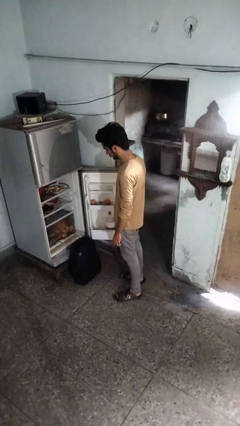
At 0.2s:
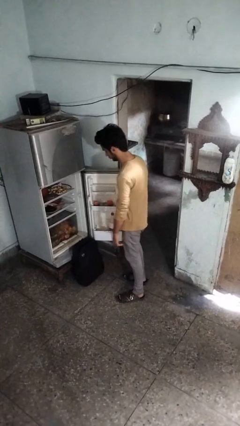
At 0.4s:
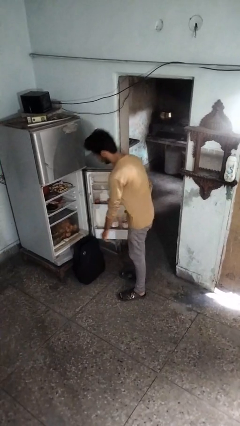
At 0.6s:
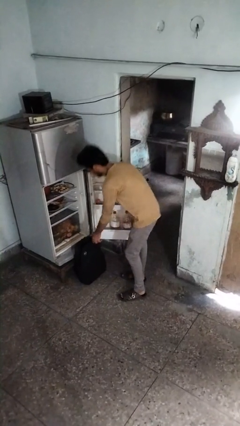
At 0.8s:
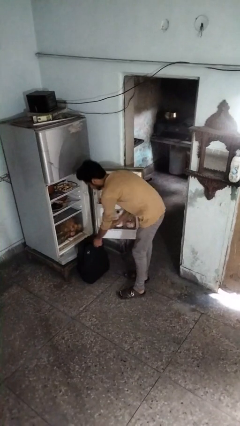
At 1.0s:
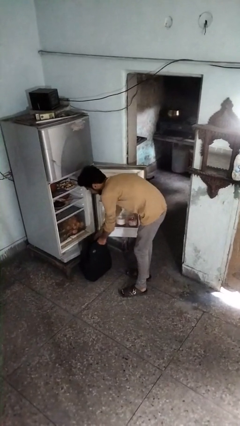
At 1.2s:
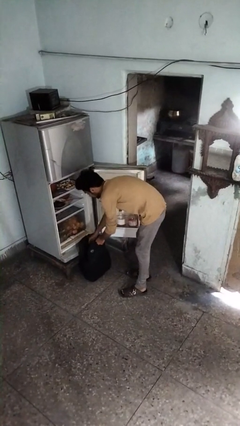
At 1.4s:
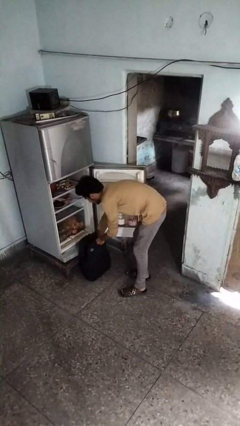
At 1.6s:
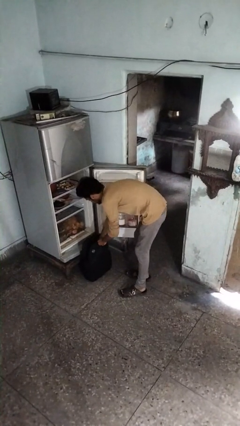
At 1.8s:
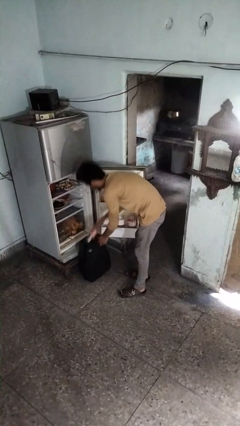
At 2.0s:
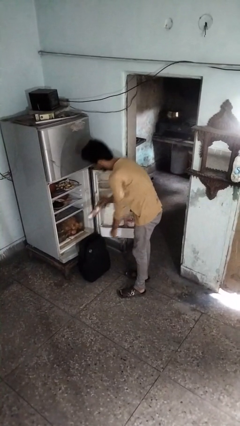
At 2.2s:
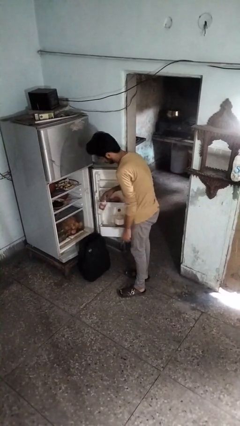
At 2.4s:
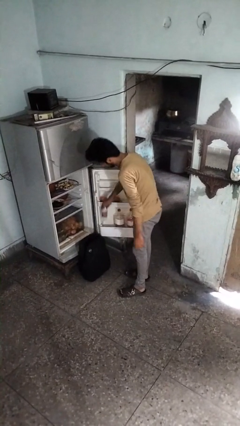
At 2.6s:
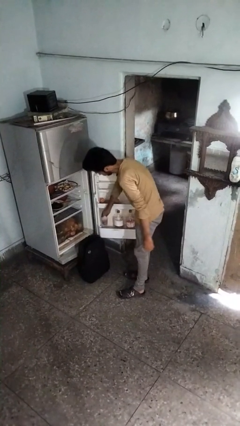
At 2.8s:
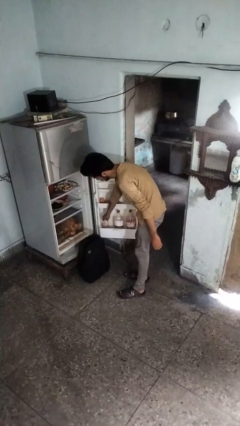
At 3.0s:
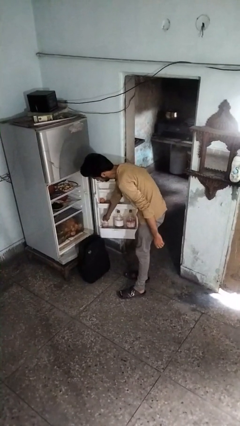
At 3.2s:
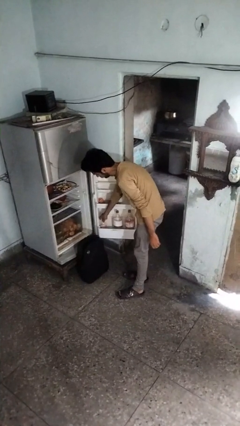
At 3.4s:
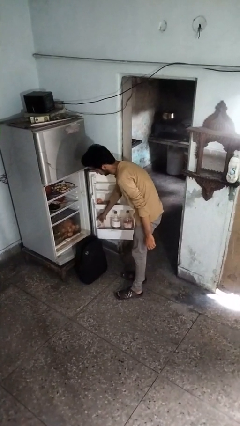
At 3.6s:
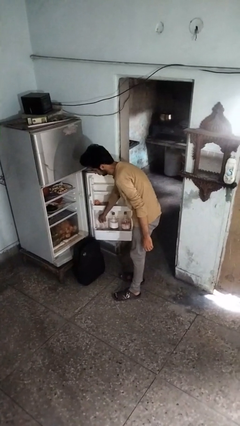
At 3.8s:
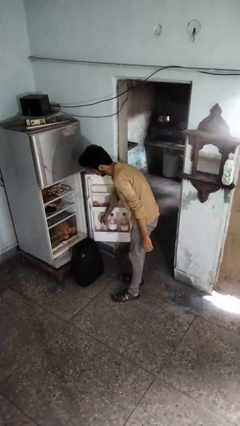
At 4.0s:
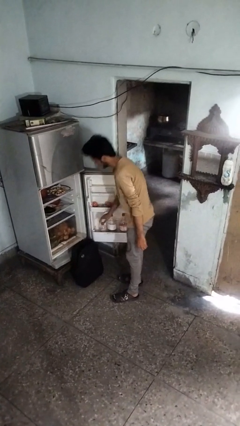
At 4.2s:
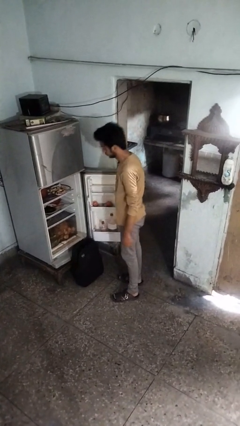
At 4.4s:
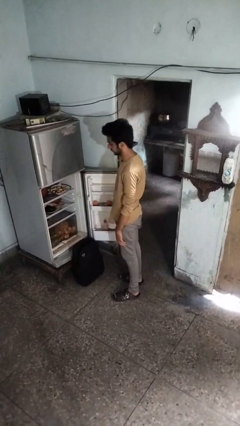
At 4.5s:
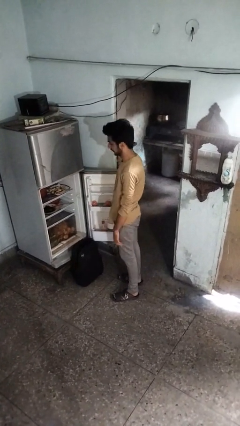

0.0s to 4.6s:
person loads groceries into refrigerator

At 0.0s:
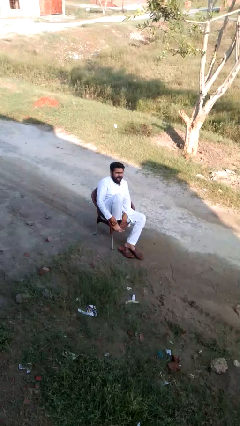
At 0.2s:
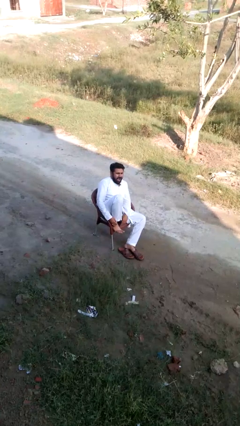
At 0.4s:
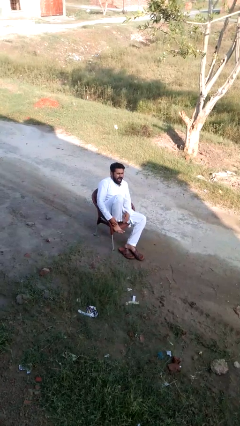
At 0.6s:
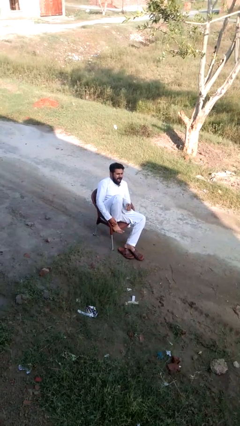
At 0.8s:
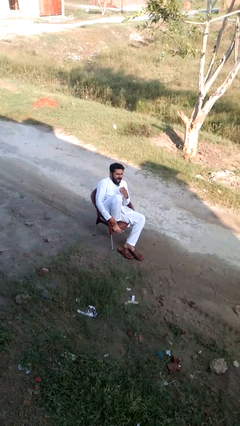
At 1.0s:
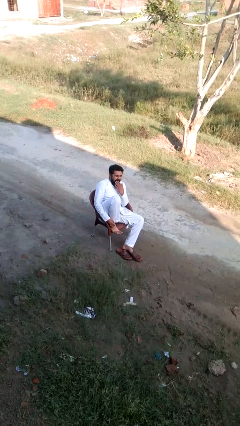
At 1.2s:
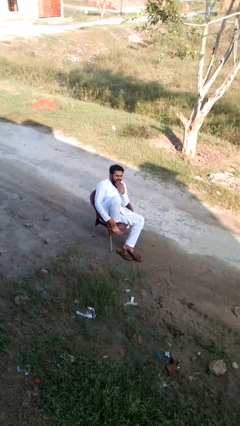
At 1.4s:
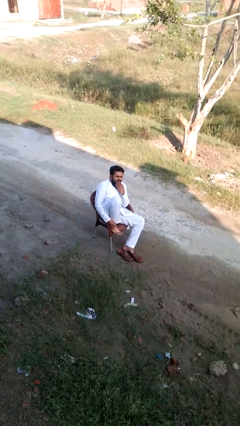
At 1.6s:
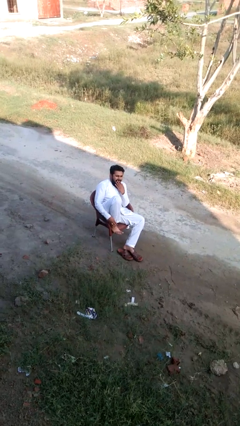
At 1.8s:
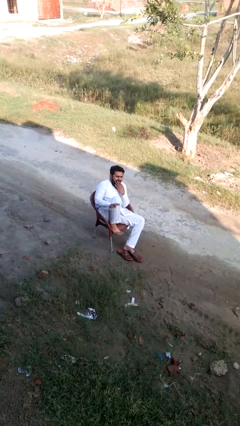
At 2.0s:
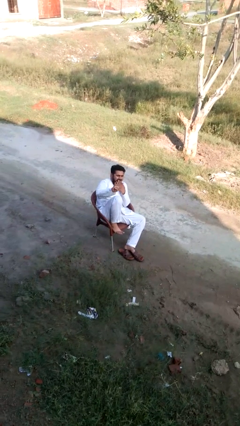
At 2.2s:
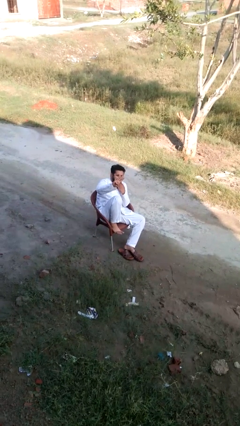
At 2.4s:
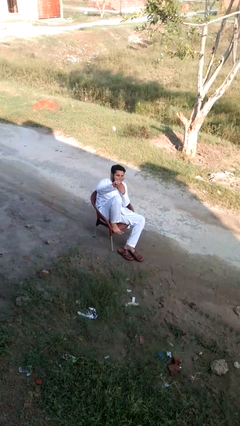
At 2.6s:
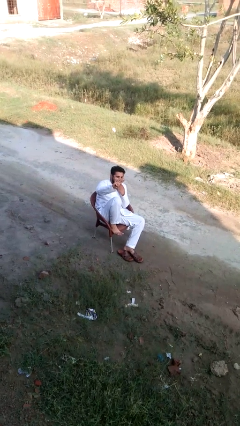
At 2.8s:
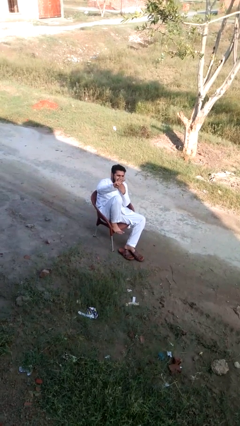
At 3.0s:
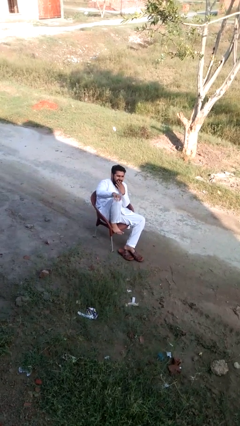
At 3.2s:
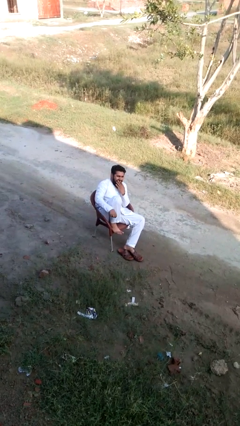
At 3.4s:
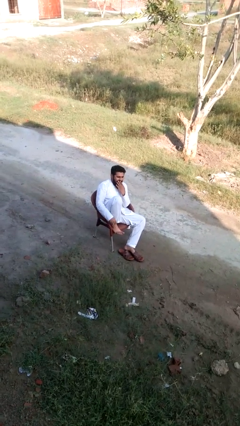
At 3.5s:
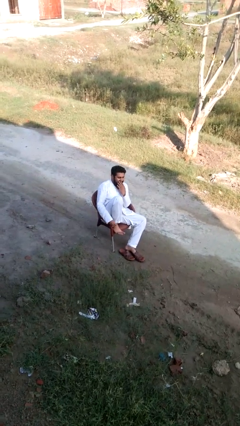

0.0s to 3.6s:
person gestures number four

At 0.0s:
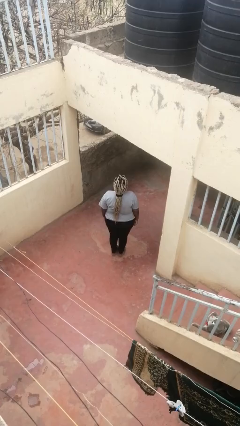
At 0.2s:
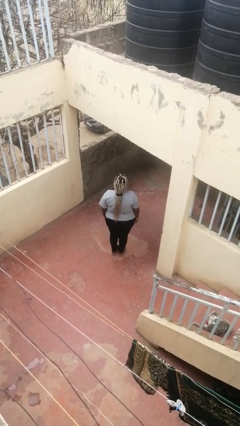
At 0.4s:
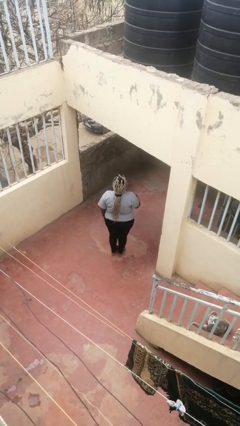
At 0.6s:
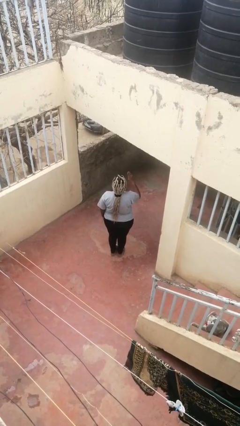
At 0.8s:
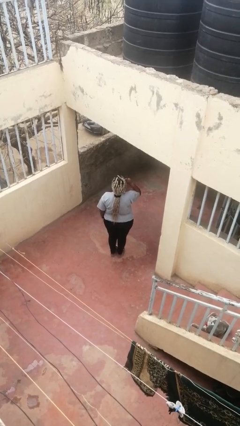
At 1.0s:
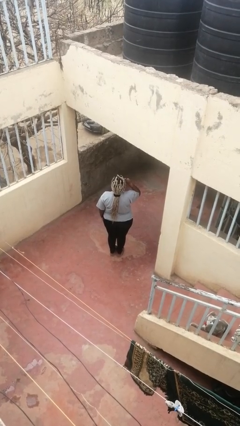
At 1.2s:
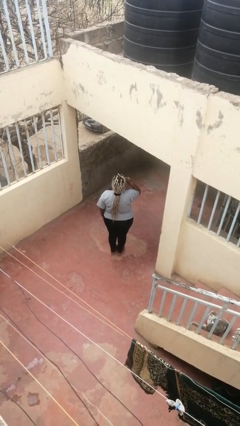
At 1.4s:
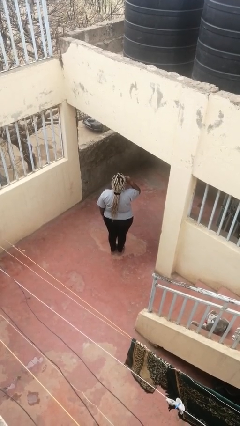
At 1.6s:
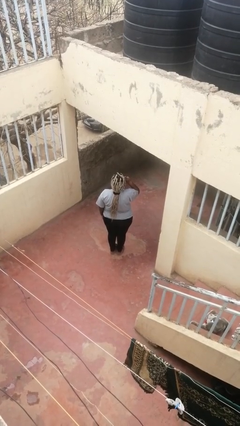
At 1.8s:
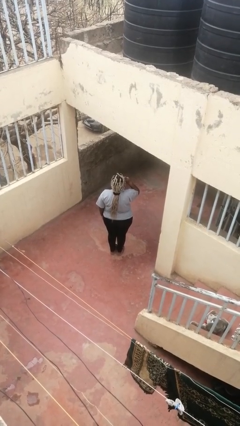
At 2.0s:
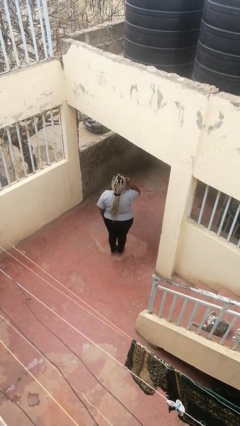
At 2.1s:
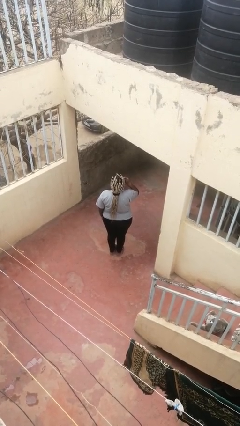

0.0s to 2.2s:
person salutes

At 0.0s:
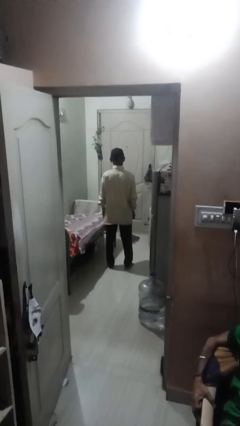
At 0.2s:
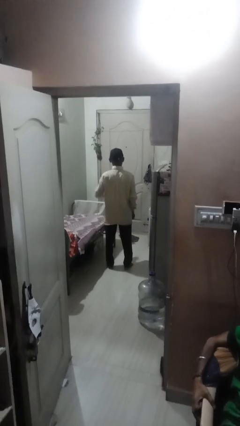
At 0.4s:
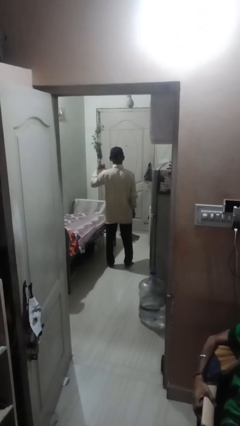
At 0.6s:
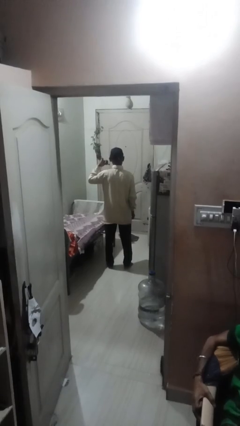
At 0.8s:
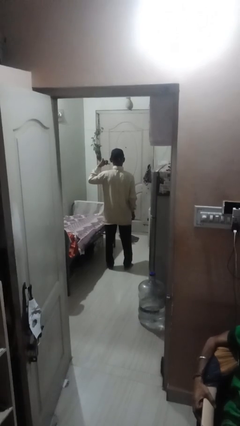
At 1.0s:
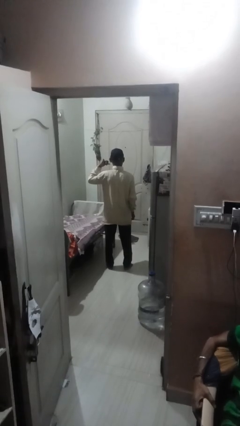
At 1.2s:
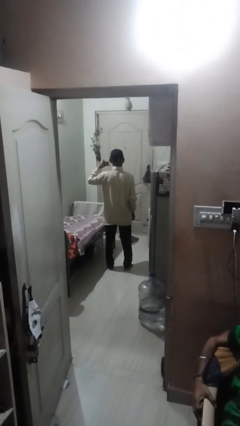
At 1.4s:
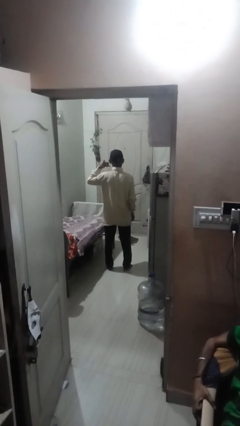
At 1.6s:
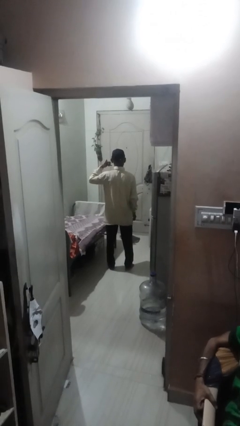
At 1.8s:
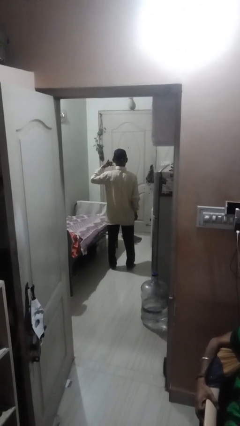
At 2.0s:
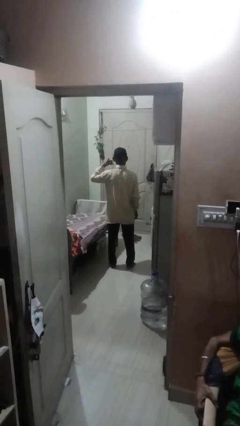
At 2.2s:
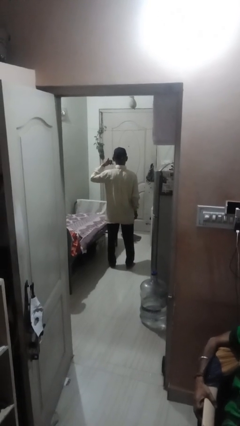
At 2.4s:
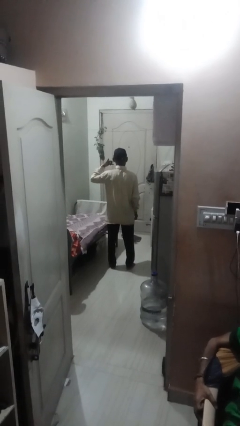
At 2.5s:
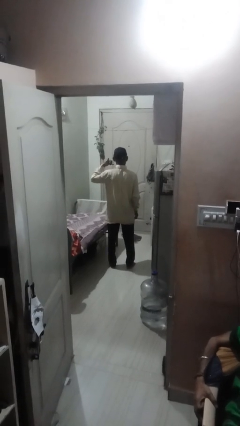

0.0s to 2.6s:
person gestures call me

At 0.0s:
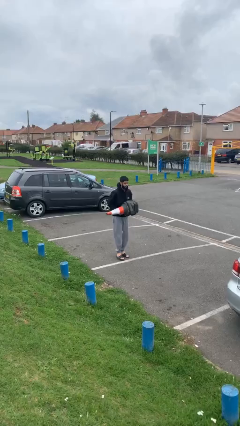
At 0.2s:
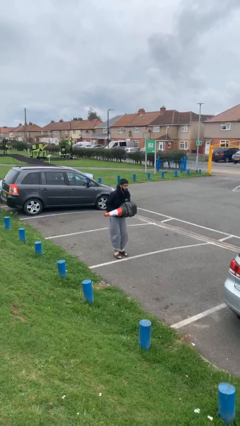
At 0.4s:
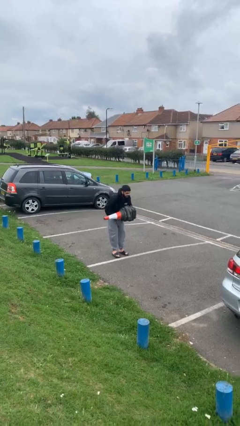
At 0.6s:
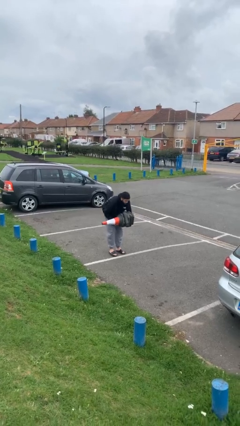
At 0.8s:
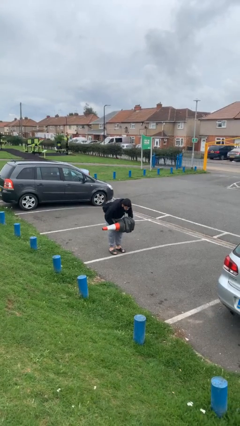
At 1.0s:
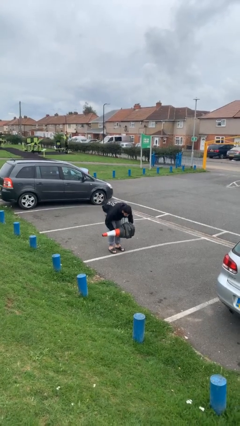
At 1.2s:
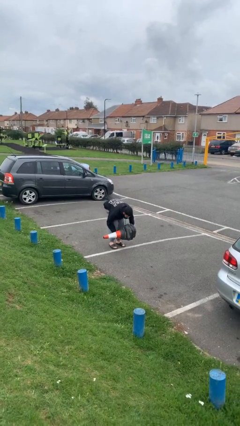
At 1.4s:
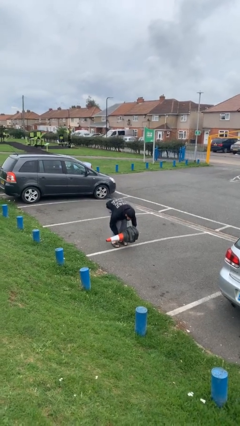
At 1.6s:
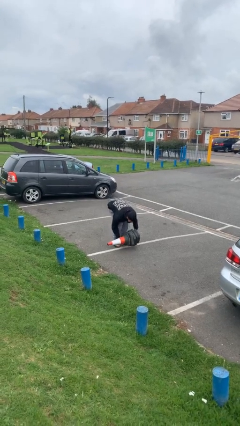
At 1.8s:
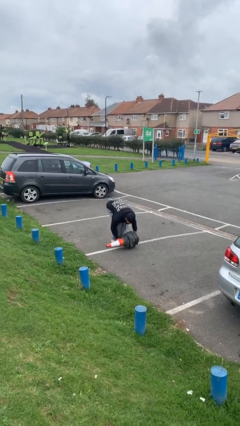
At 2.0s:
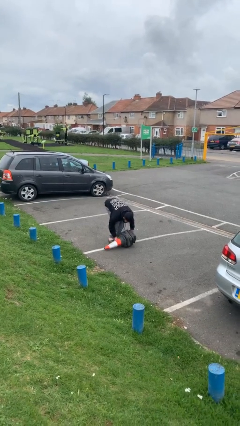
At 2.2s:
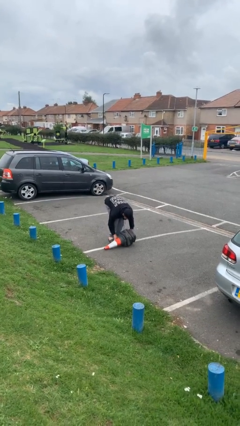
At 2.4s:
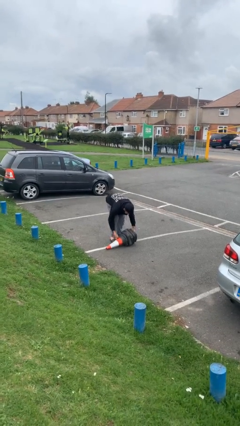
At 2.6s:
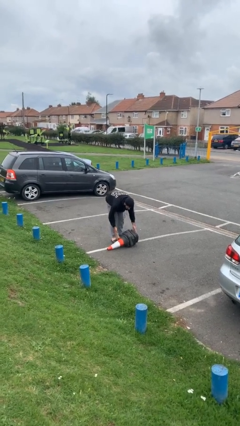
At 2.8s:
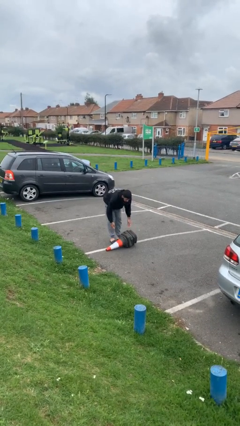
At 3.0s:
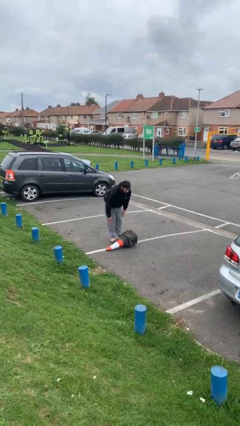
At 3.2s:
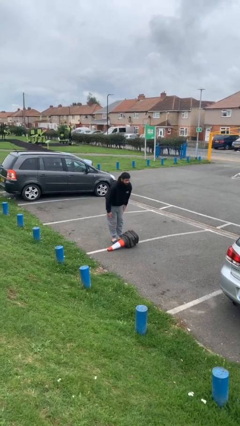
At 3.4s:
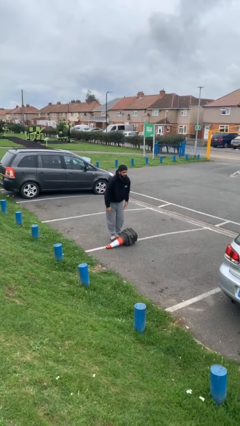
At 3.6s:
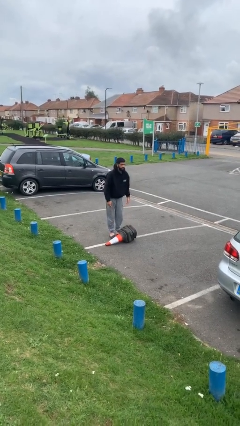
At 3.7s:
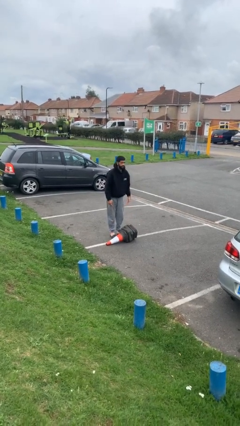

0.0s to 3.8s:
person puts down object on floor

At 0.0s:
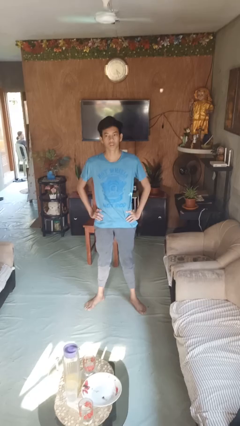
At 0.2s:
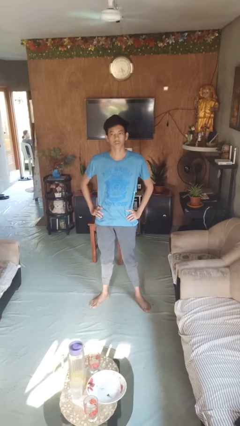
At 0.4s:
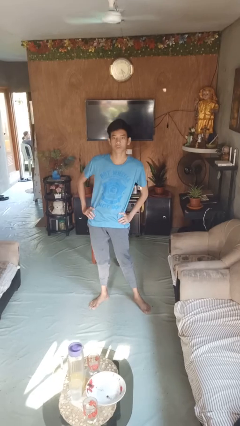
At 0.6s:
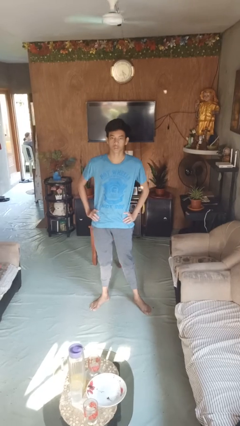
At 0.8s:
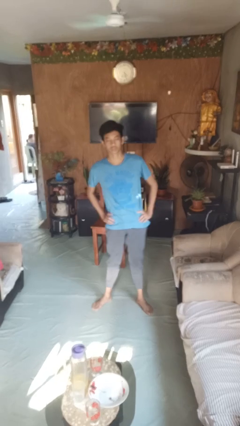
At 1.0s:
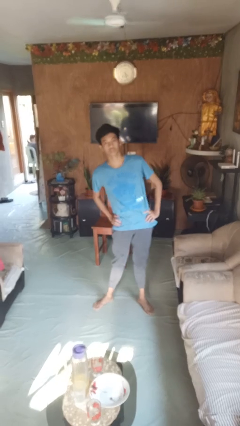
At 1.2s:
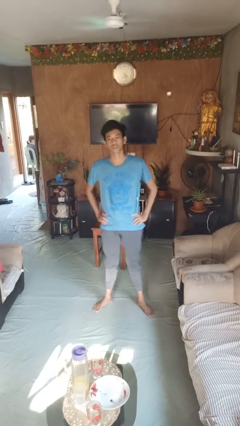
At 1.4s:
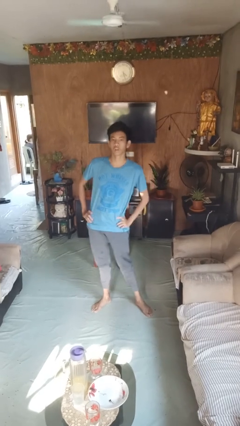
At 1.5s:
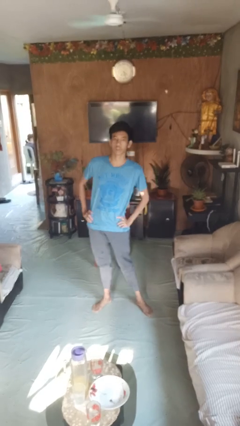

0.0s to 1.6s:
person wiggles hips
